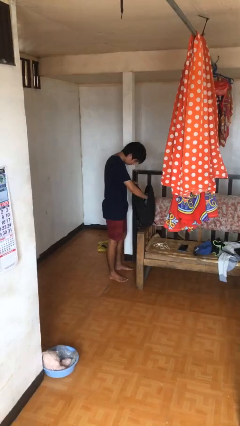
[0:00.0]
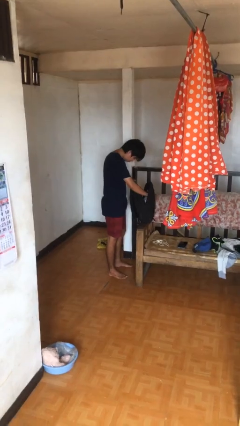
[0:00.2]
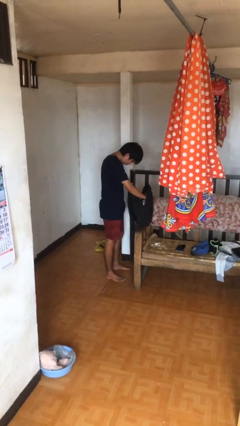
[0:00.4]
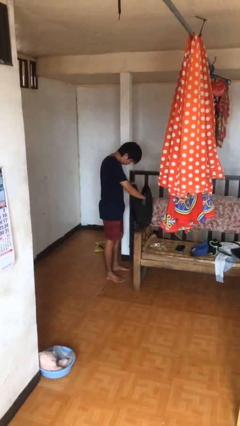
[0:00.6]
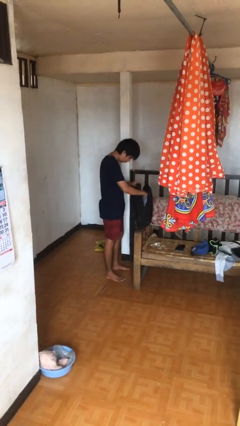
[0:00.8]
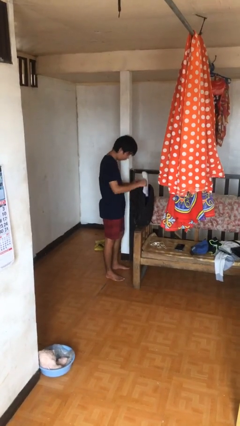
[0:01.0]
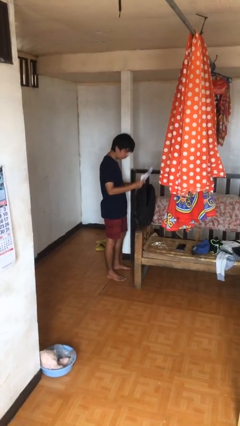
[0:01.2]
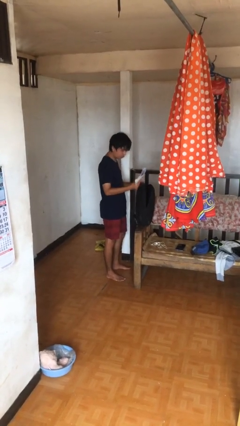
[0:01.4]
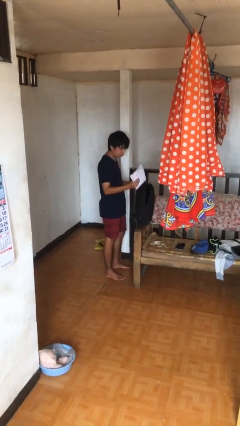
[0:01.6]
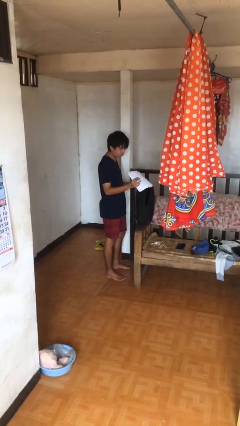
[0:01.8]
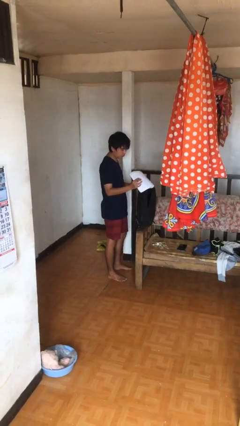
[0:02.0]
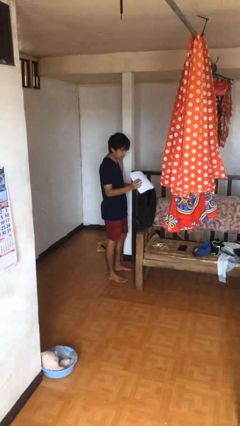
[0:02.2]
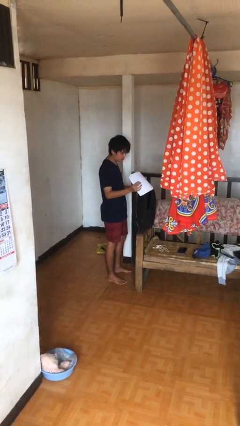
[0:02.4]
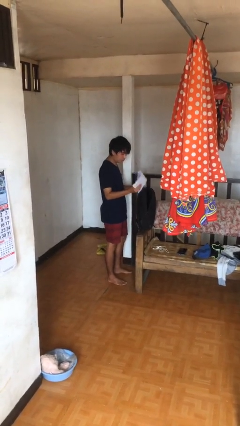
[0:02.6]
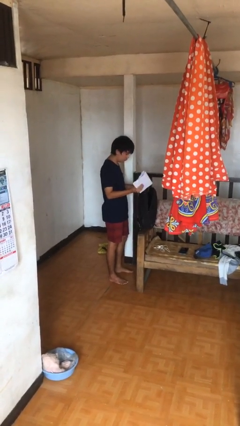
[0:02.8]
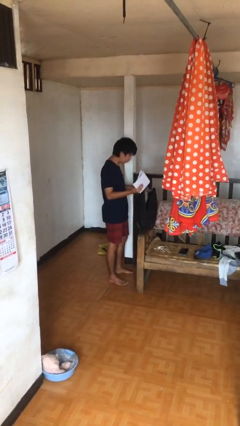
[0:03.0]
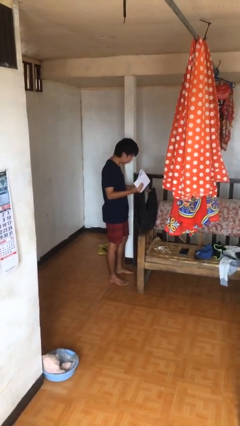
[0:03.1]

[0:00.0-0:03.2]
person takes object from backpack

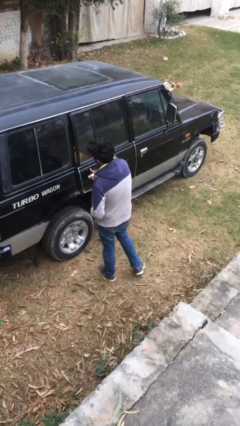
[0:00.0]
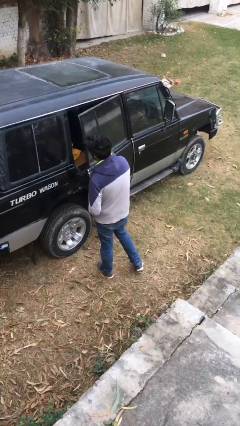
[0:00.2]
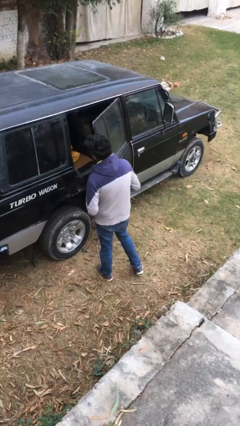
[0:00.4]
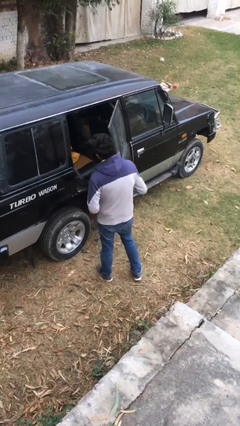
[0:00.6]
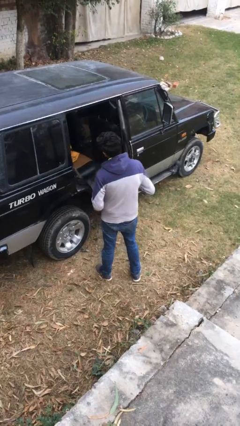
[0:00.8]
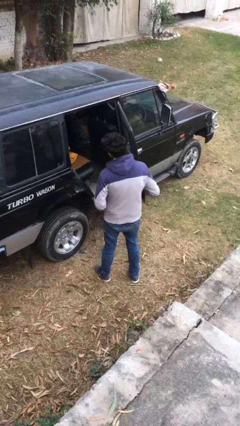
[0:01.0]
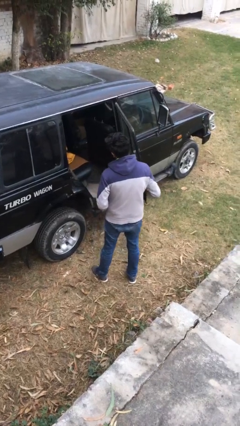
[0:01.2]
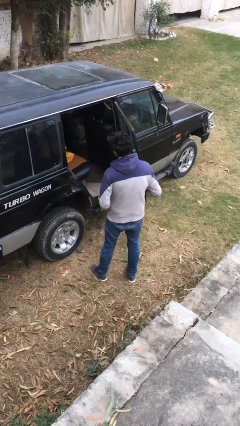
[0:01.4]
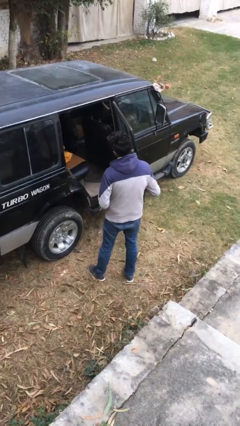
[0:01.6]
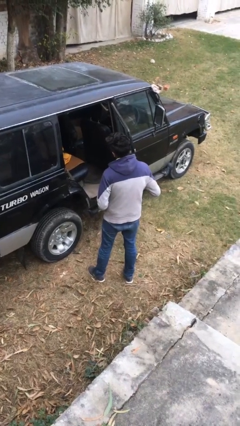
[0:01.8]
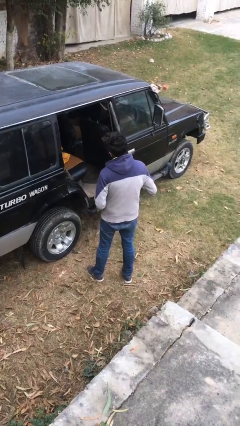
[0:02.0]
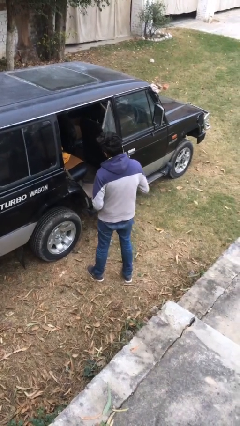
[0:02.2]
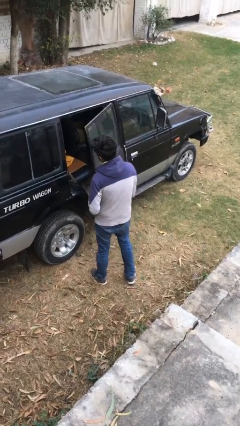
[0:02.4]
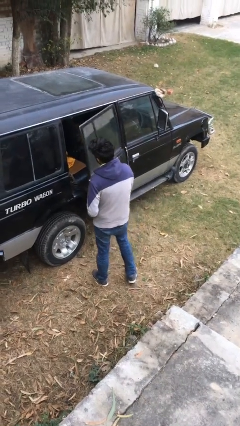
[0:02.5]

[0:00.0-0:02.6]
person opens car door

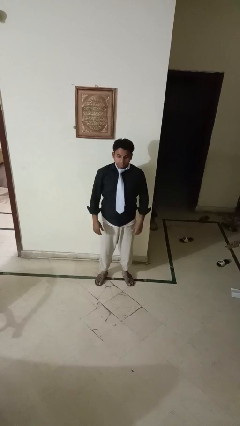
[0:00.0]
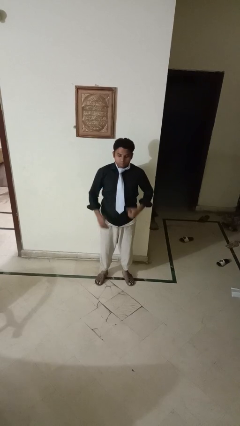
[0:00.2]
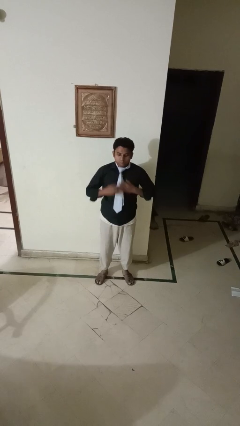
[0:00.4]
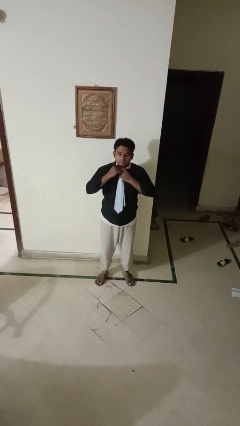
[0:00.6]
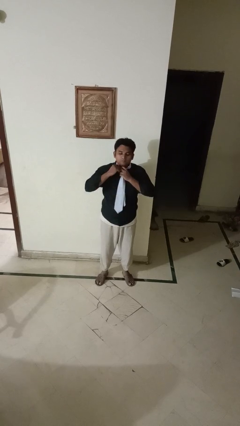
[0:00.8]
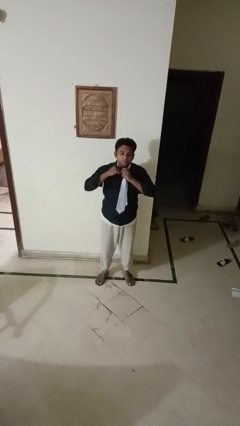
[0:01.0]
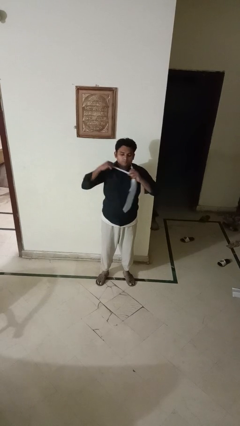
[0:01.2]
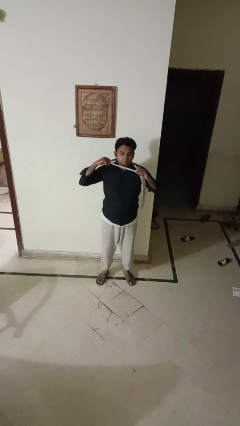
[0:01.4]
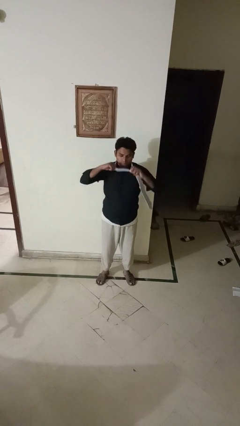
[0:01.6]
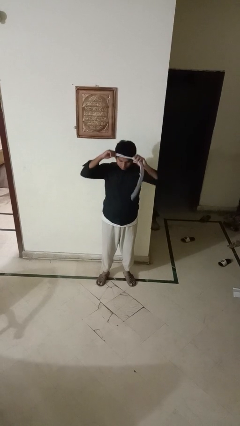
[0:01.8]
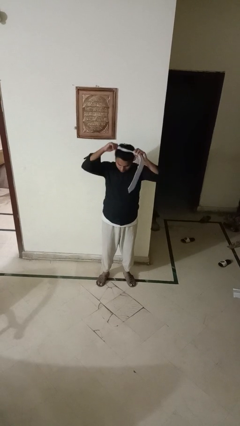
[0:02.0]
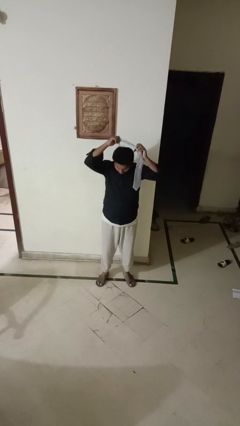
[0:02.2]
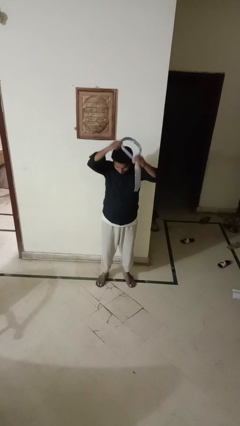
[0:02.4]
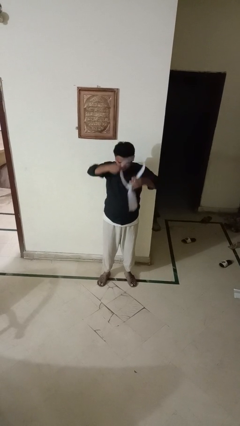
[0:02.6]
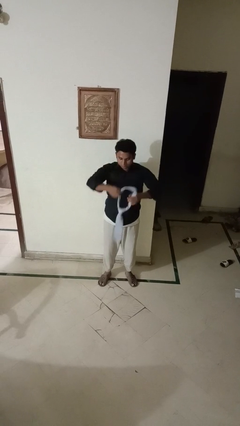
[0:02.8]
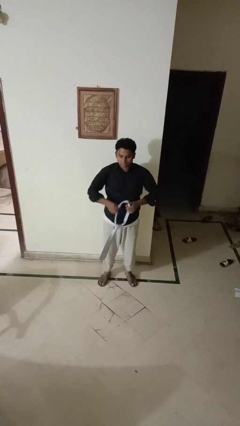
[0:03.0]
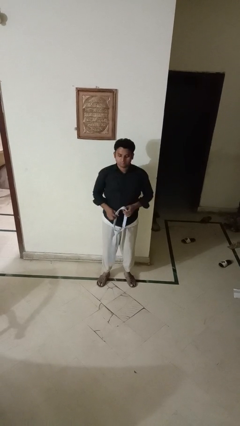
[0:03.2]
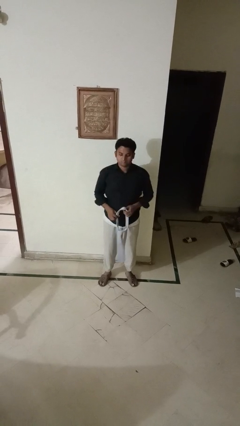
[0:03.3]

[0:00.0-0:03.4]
person takes off necktie

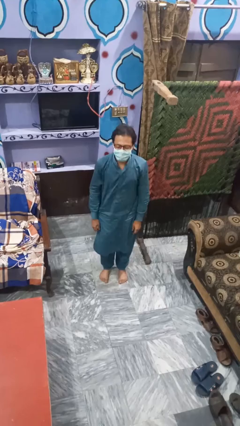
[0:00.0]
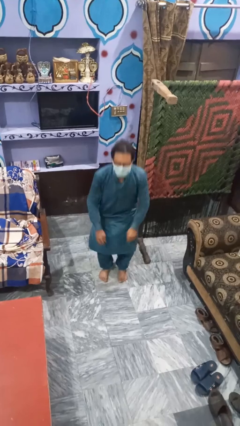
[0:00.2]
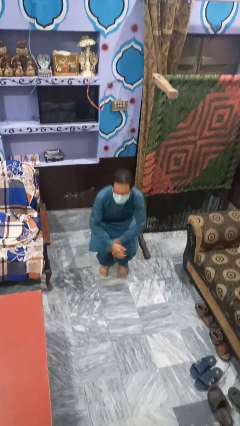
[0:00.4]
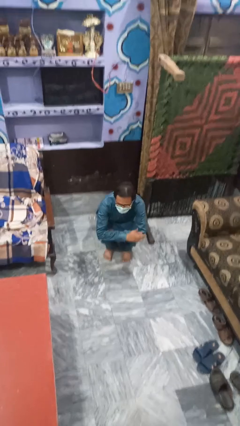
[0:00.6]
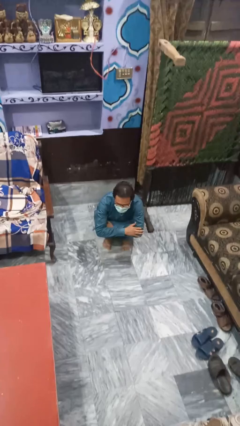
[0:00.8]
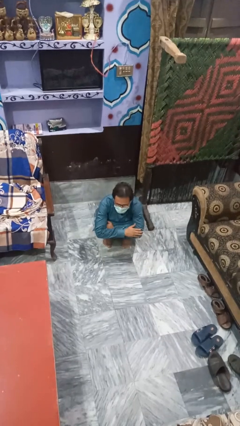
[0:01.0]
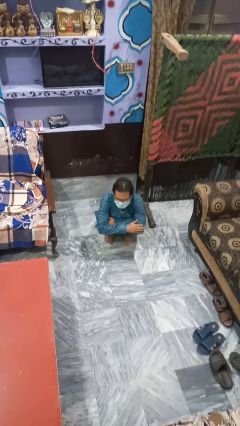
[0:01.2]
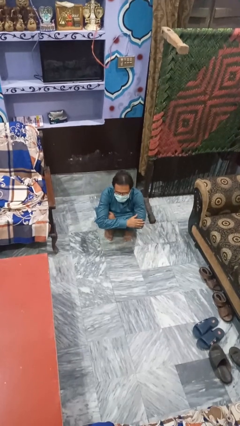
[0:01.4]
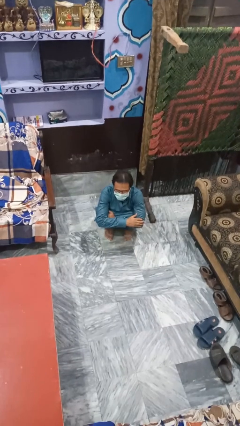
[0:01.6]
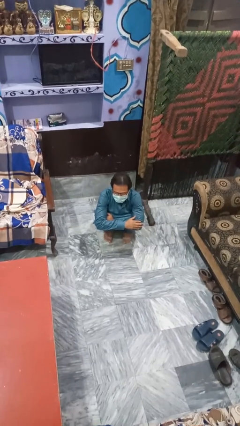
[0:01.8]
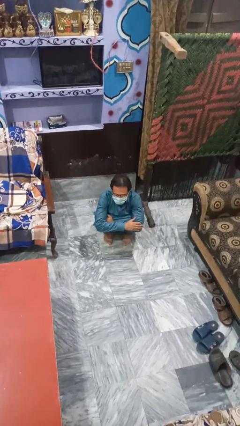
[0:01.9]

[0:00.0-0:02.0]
person squats

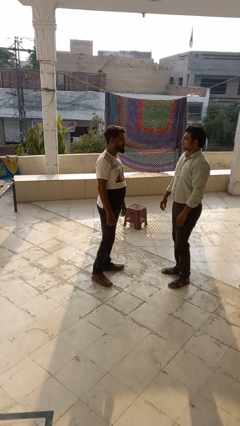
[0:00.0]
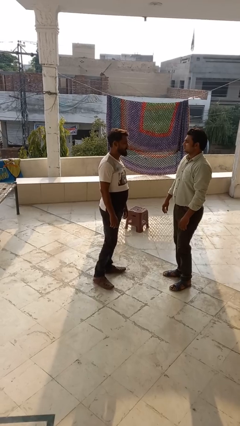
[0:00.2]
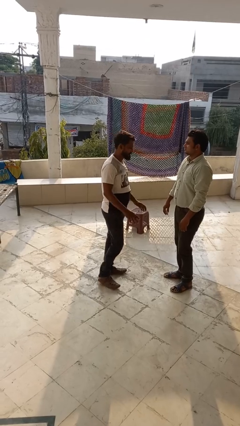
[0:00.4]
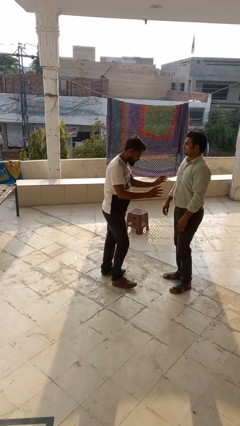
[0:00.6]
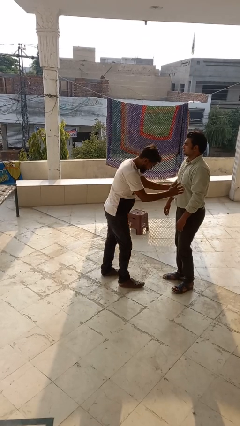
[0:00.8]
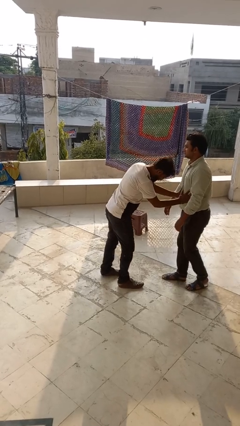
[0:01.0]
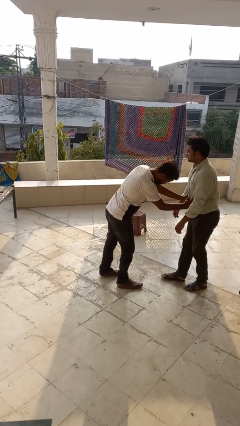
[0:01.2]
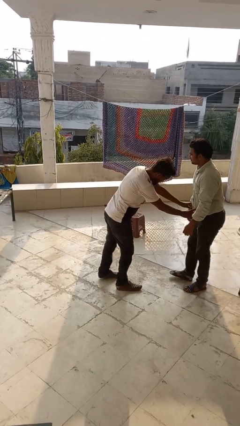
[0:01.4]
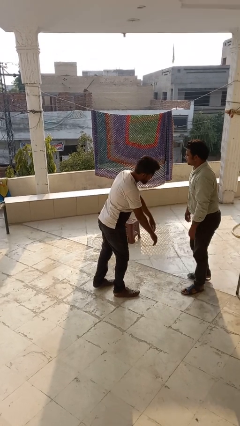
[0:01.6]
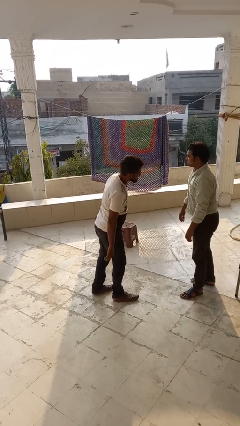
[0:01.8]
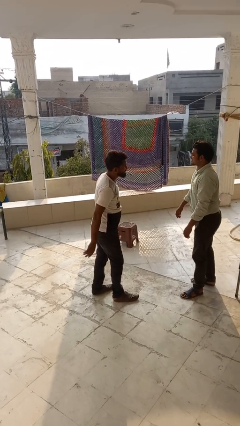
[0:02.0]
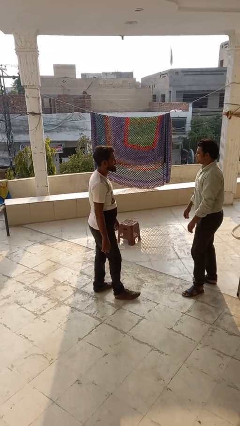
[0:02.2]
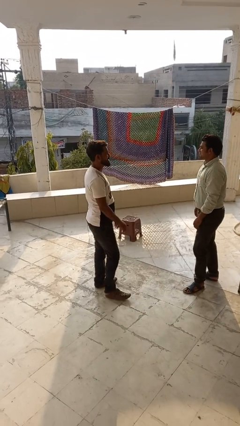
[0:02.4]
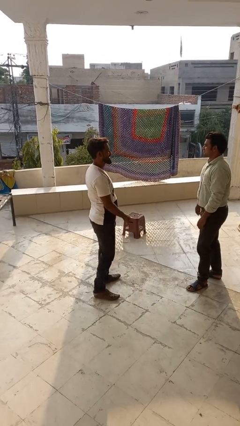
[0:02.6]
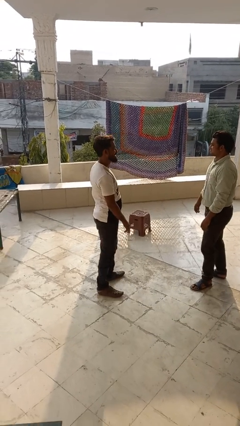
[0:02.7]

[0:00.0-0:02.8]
person shoves person

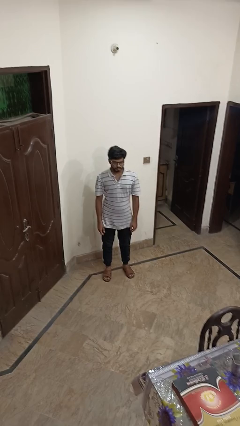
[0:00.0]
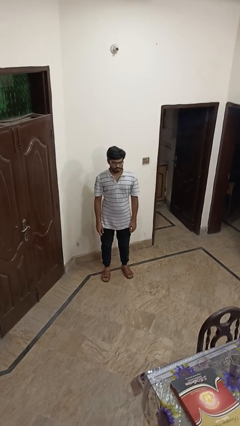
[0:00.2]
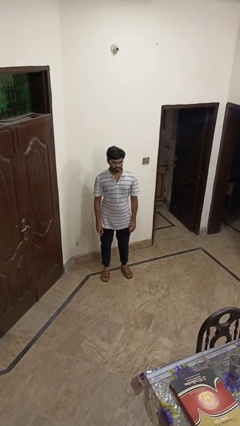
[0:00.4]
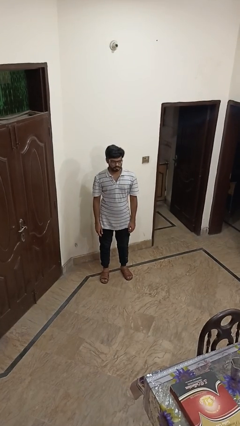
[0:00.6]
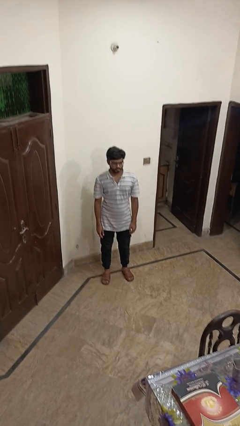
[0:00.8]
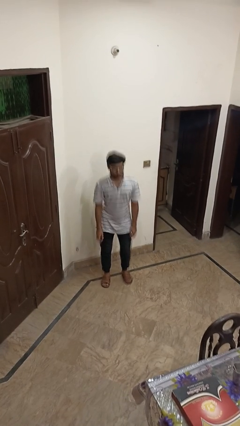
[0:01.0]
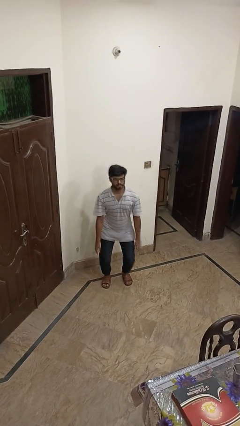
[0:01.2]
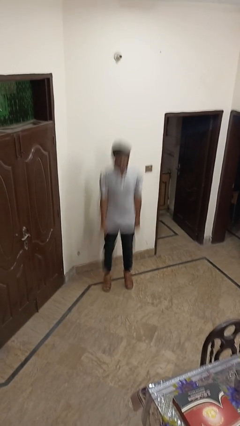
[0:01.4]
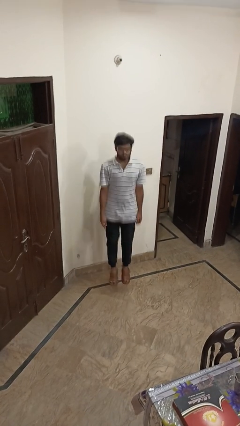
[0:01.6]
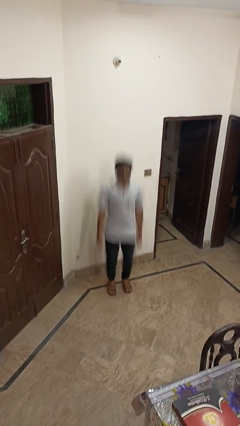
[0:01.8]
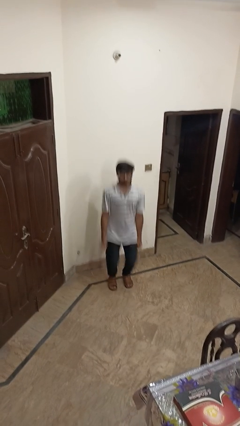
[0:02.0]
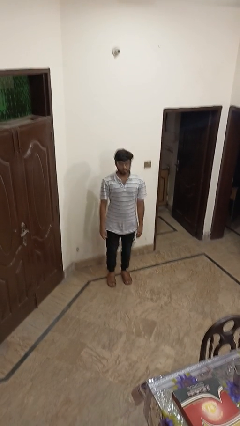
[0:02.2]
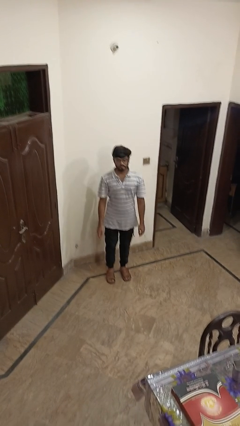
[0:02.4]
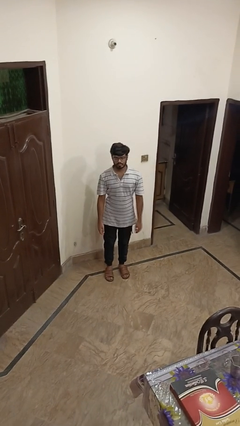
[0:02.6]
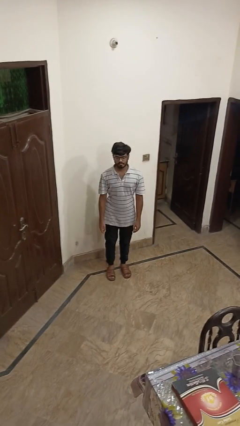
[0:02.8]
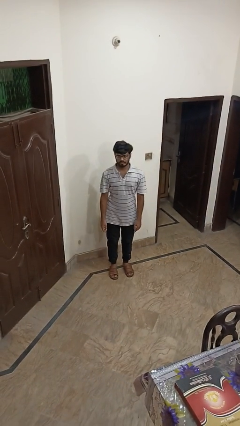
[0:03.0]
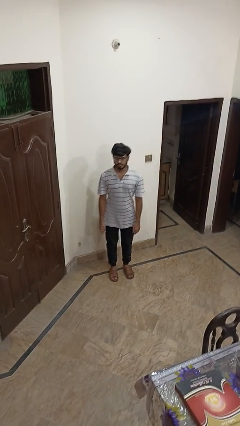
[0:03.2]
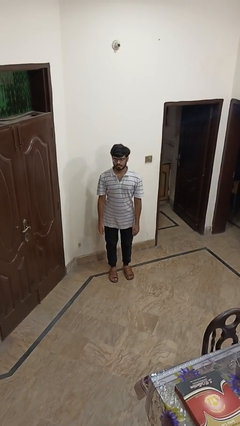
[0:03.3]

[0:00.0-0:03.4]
person jumps
